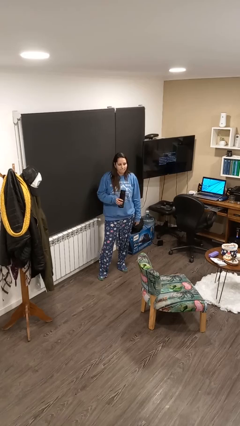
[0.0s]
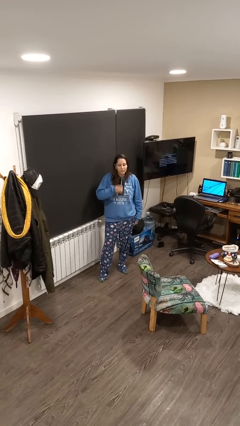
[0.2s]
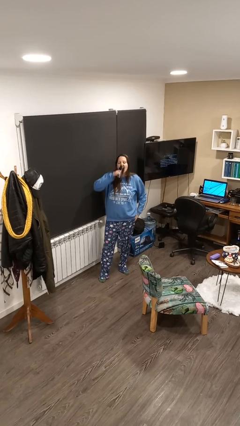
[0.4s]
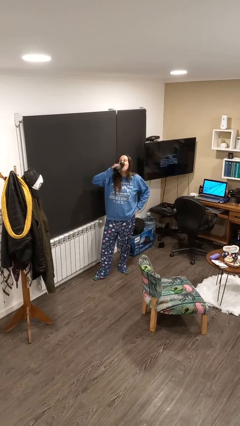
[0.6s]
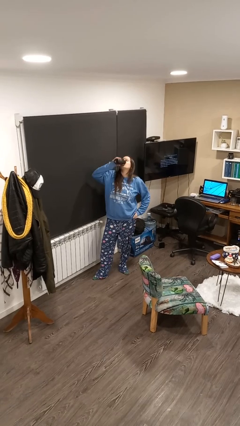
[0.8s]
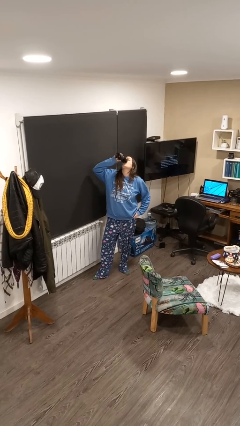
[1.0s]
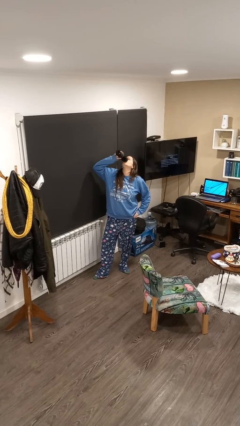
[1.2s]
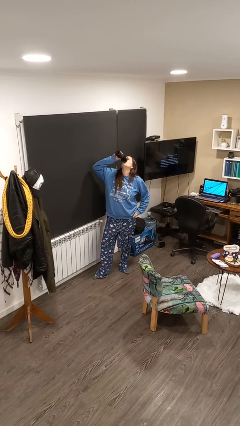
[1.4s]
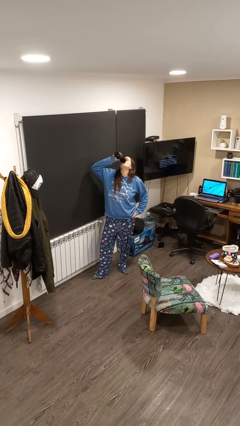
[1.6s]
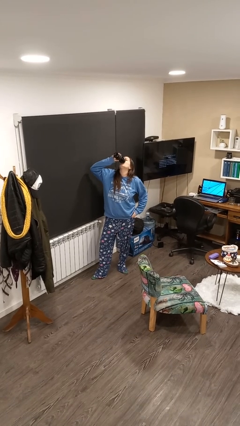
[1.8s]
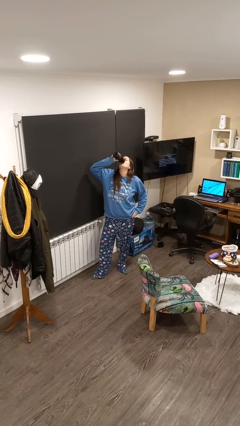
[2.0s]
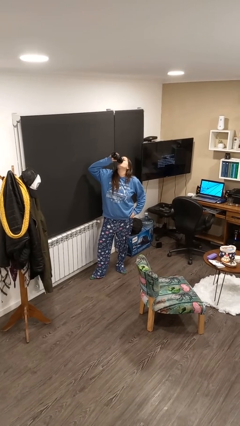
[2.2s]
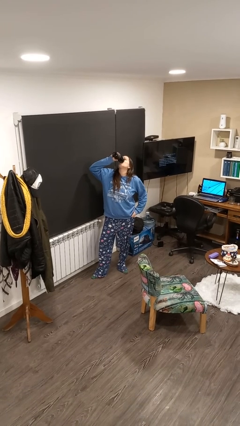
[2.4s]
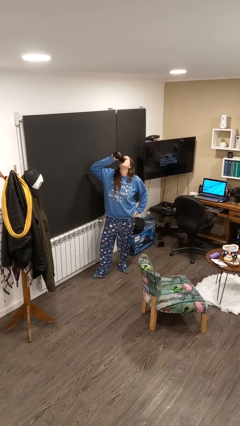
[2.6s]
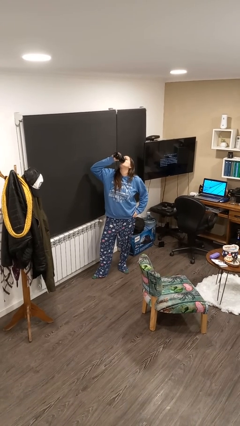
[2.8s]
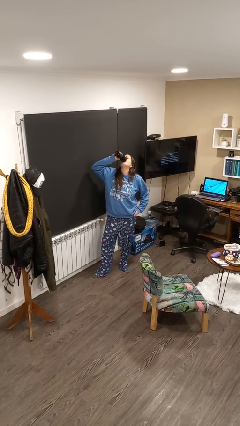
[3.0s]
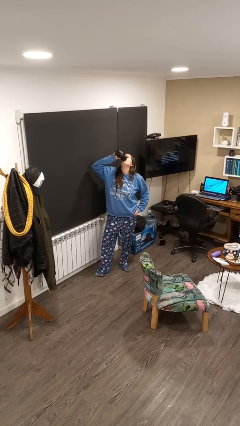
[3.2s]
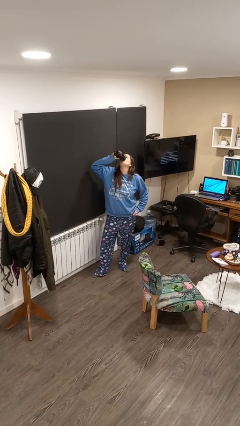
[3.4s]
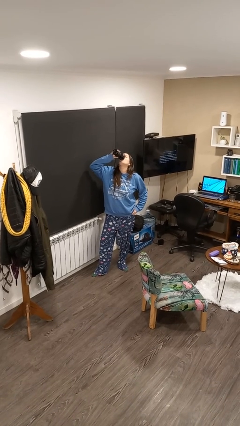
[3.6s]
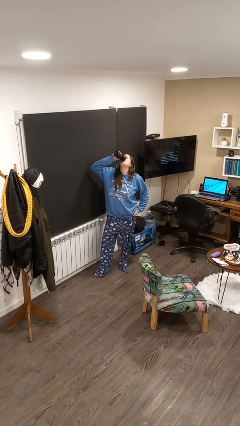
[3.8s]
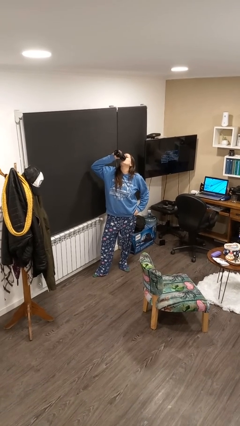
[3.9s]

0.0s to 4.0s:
person drinks from bottle

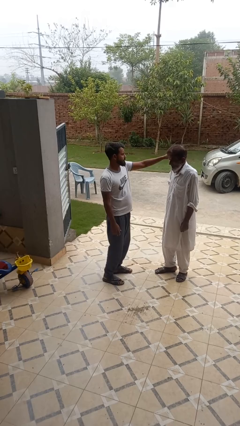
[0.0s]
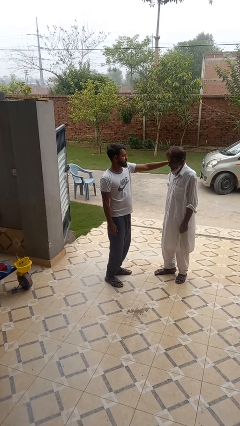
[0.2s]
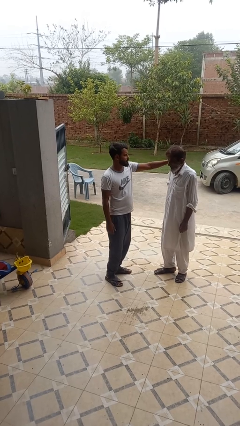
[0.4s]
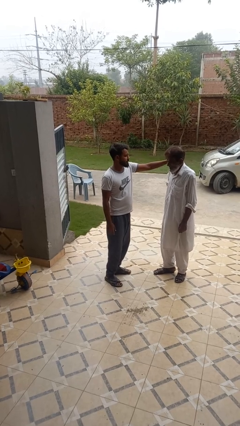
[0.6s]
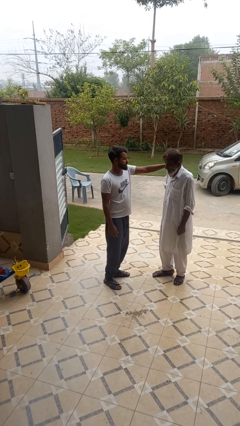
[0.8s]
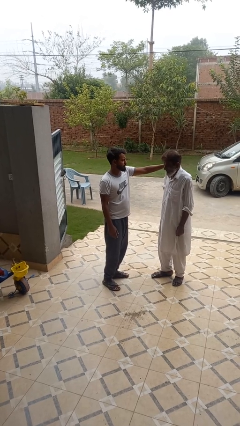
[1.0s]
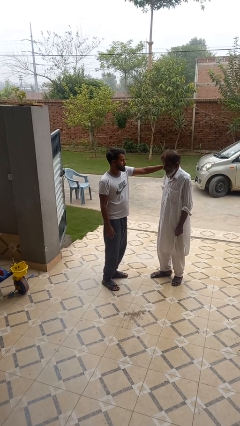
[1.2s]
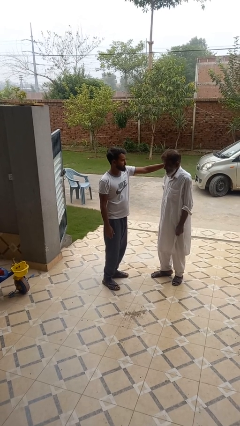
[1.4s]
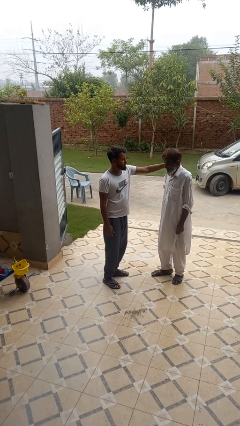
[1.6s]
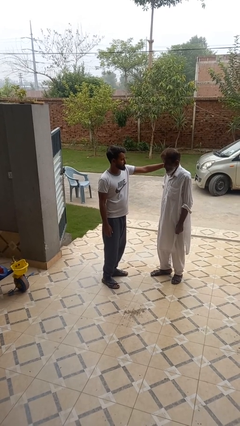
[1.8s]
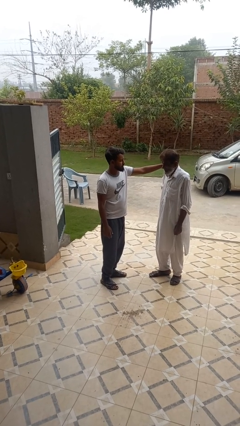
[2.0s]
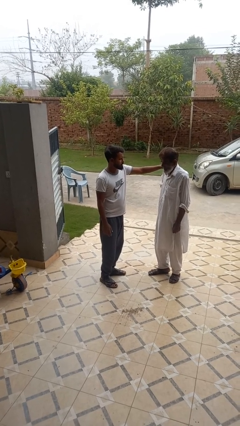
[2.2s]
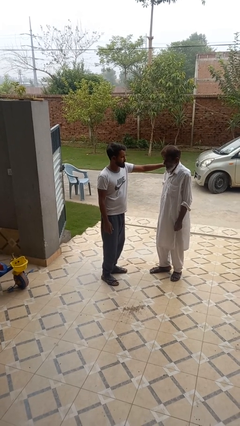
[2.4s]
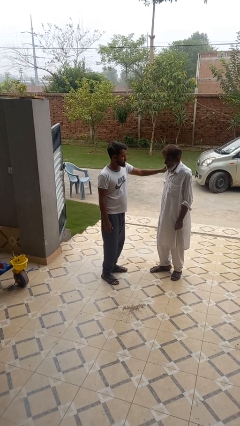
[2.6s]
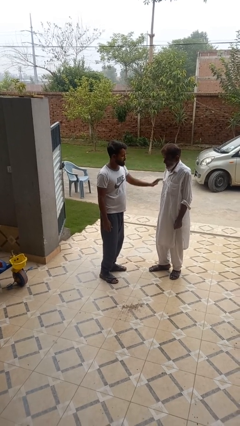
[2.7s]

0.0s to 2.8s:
person pounds shoulders of person

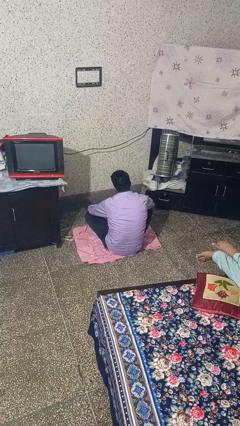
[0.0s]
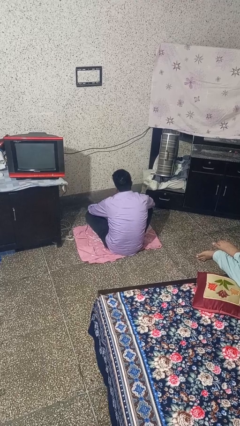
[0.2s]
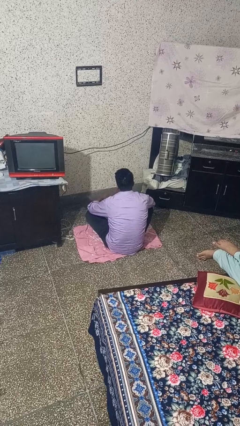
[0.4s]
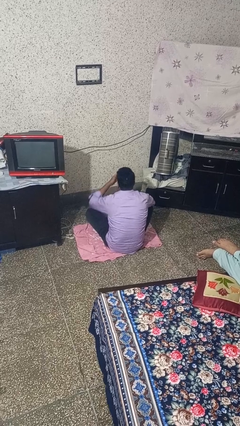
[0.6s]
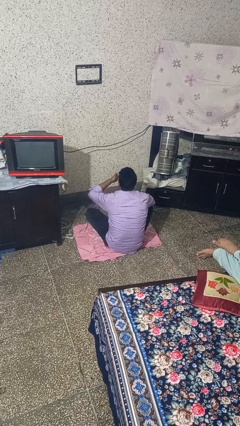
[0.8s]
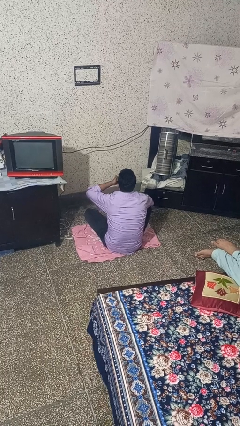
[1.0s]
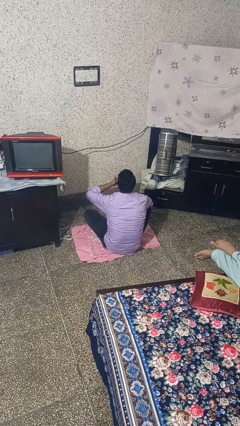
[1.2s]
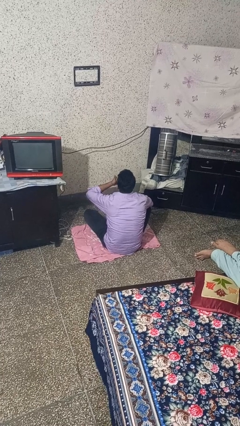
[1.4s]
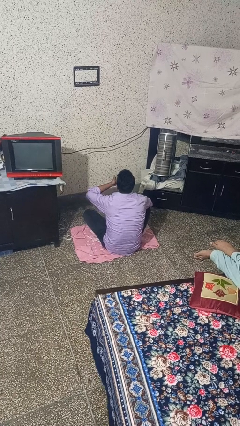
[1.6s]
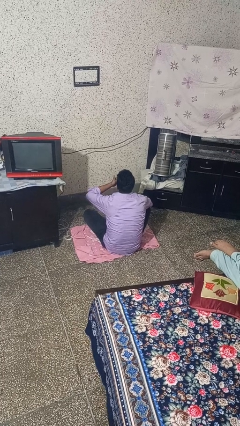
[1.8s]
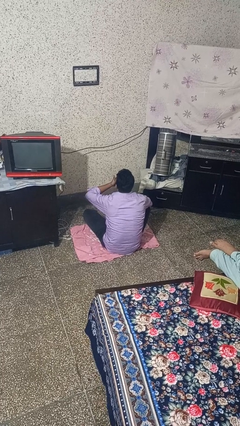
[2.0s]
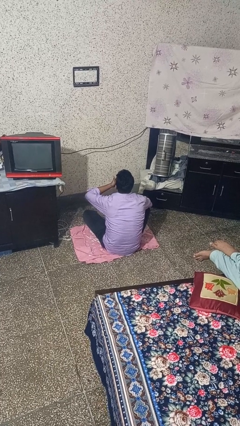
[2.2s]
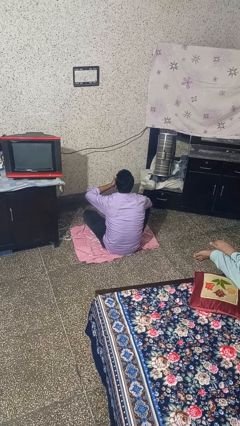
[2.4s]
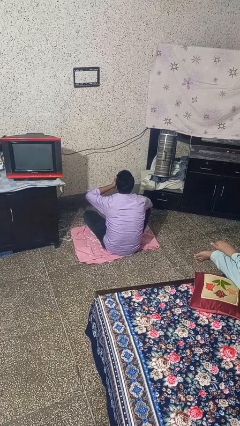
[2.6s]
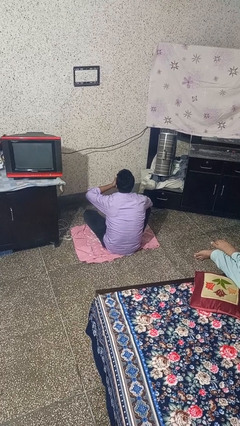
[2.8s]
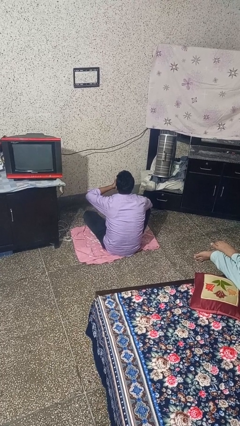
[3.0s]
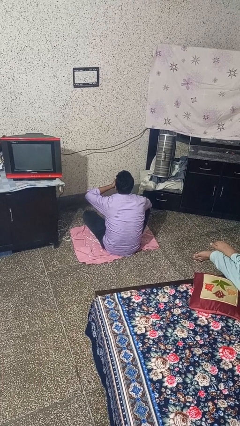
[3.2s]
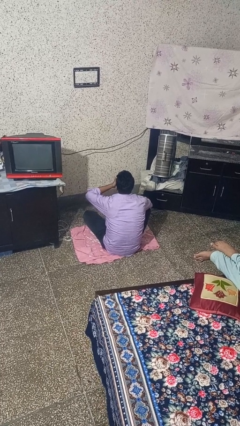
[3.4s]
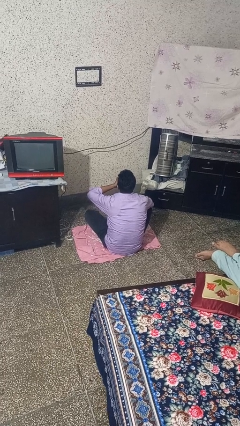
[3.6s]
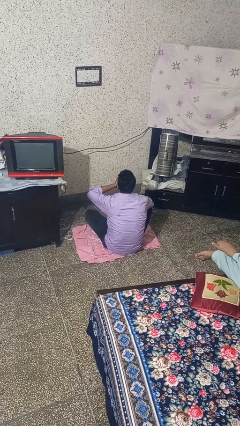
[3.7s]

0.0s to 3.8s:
person yawns

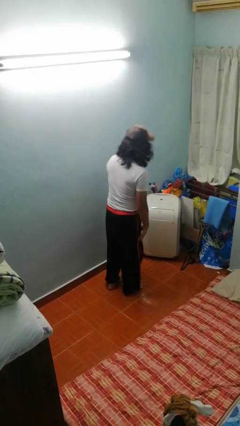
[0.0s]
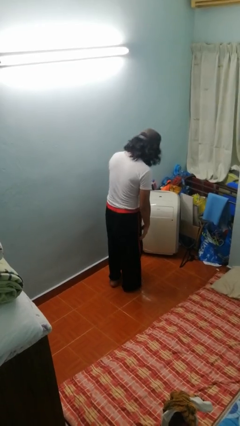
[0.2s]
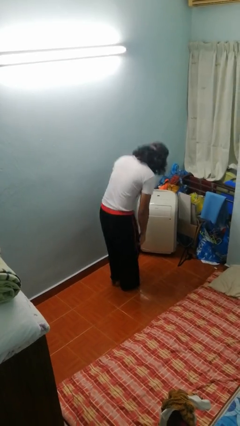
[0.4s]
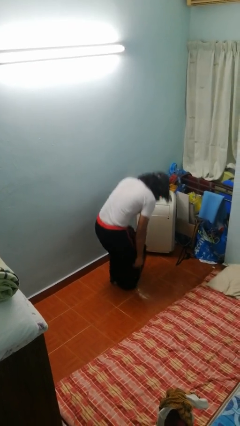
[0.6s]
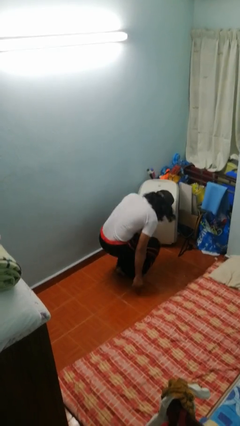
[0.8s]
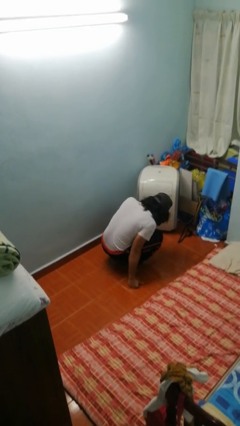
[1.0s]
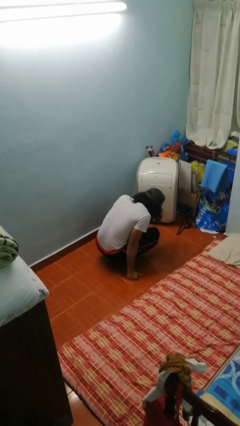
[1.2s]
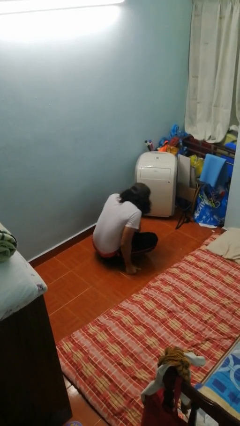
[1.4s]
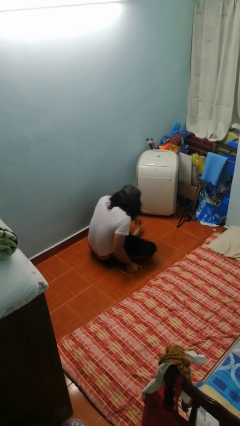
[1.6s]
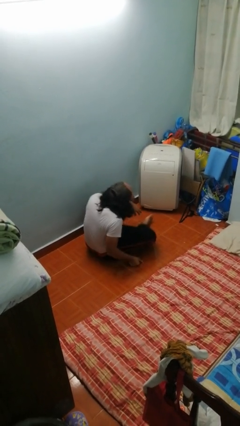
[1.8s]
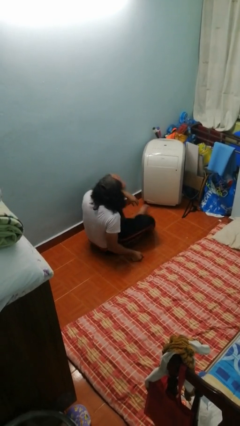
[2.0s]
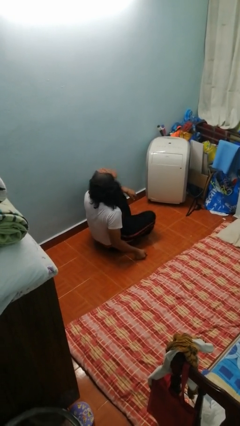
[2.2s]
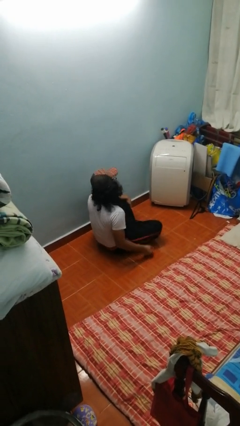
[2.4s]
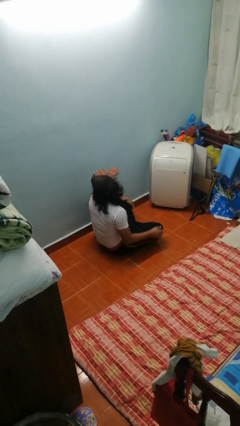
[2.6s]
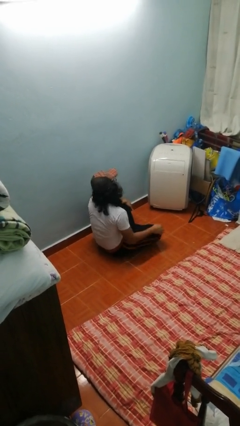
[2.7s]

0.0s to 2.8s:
person sits crisscross

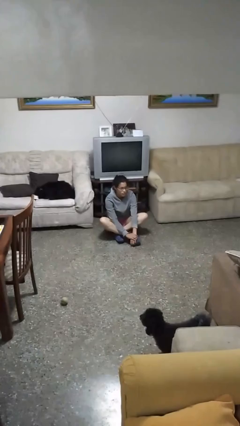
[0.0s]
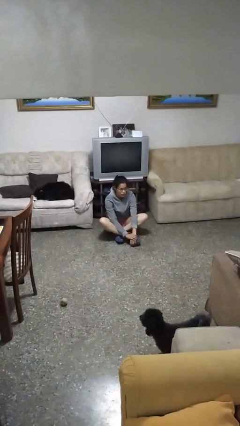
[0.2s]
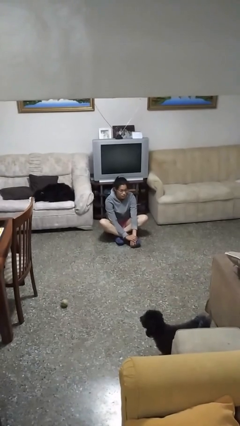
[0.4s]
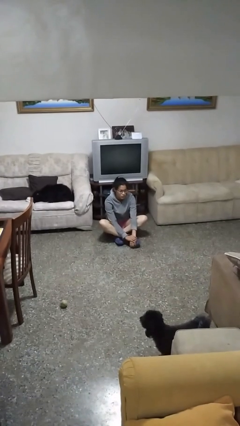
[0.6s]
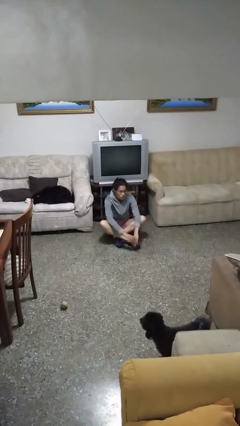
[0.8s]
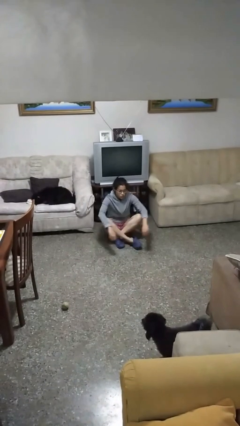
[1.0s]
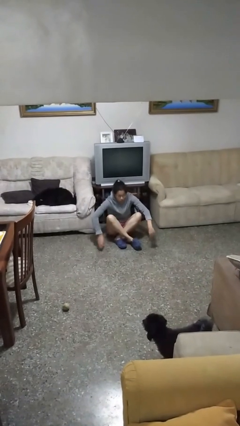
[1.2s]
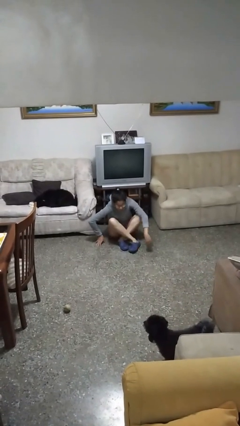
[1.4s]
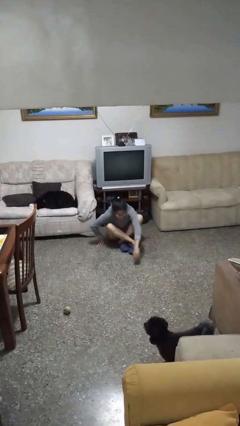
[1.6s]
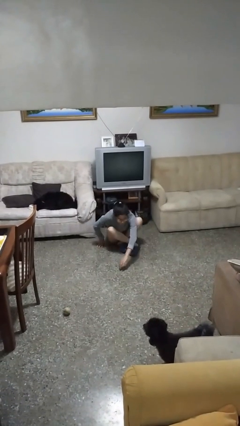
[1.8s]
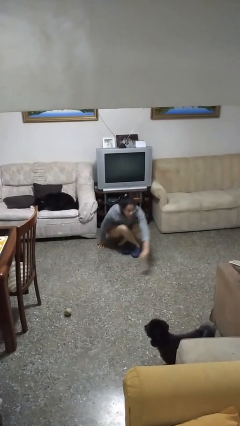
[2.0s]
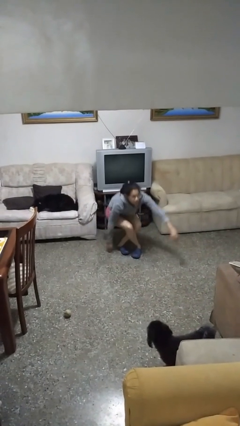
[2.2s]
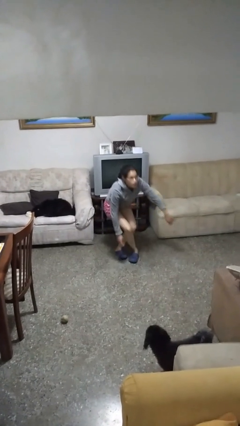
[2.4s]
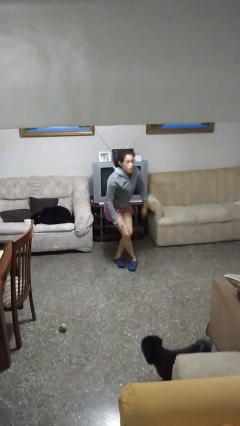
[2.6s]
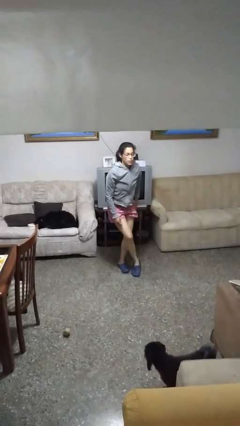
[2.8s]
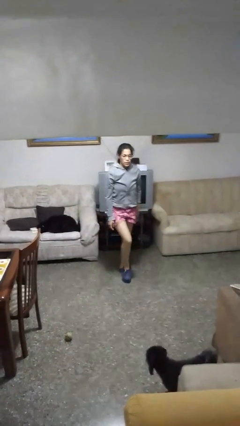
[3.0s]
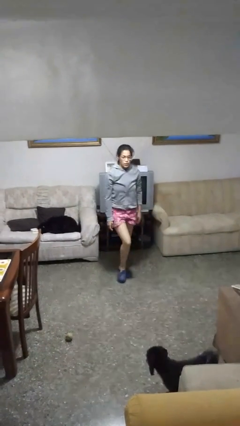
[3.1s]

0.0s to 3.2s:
person stands up from floor

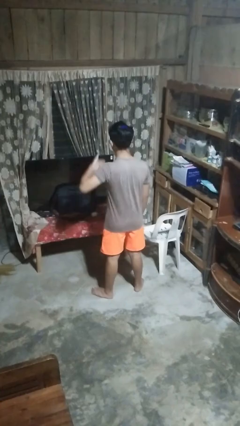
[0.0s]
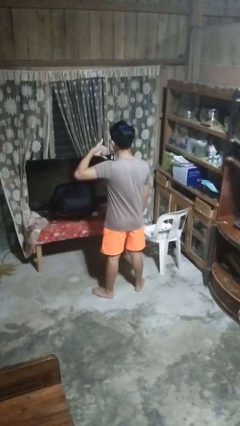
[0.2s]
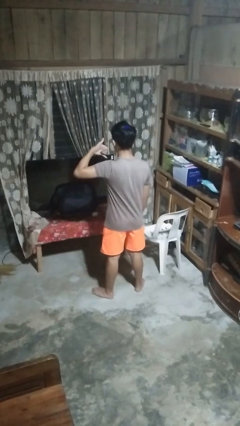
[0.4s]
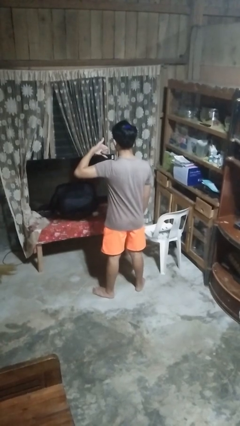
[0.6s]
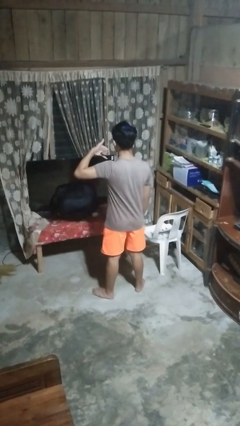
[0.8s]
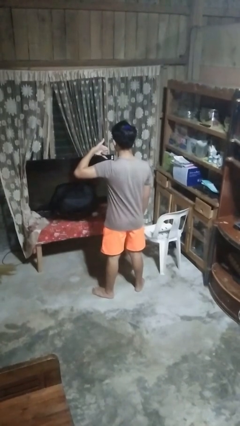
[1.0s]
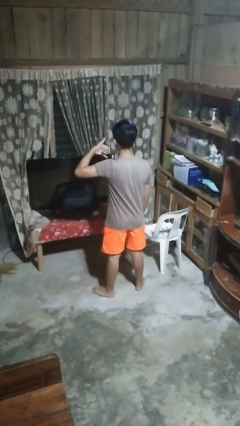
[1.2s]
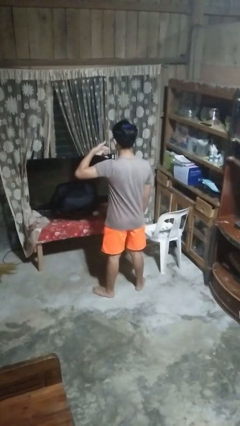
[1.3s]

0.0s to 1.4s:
person gestures call me
